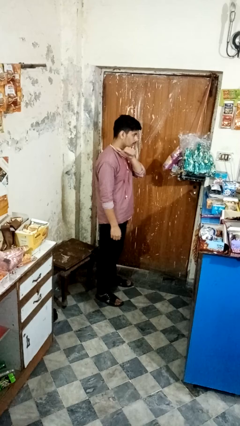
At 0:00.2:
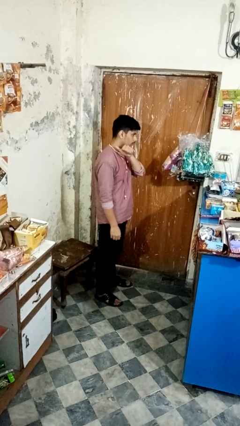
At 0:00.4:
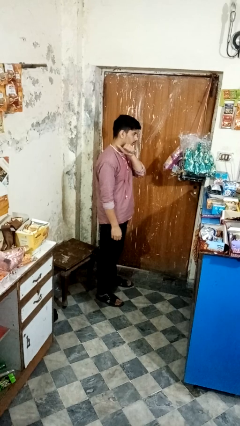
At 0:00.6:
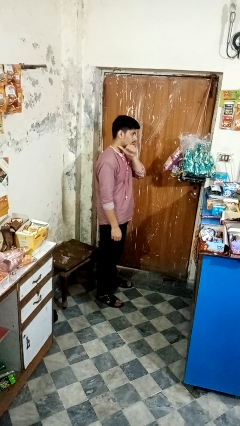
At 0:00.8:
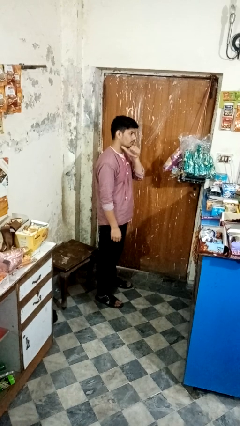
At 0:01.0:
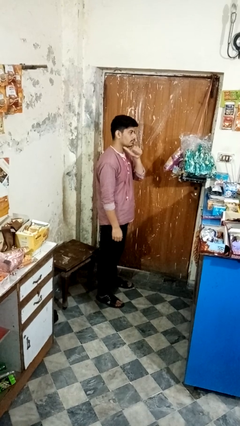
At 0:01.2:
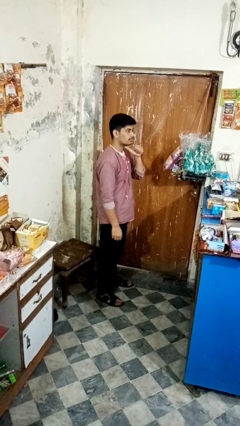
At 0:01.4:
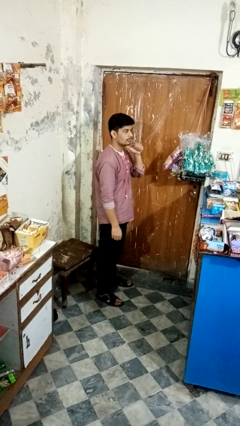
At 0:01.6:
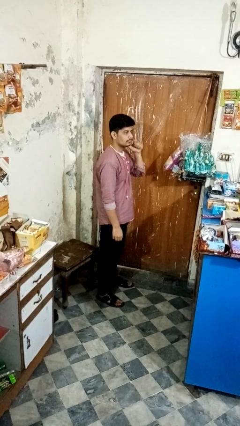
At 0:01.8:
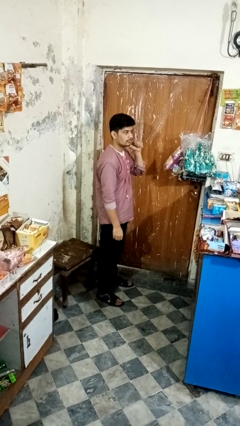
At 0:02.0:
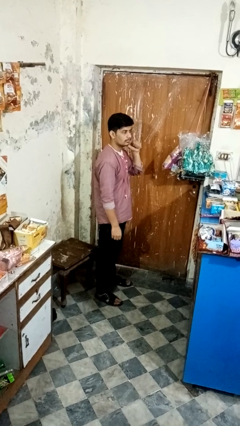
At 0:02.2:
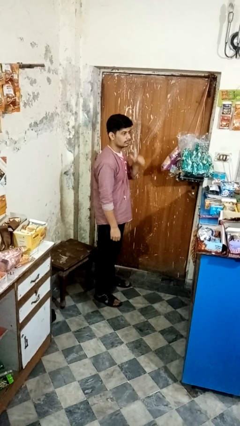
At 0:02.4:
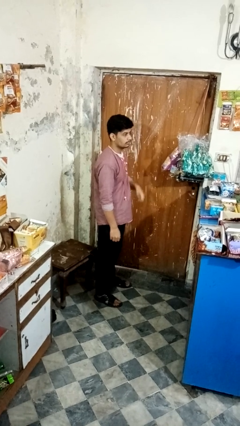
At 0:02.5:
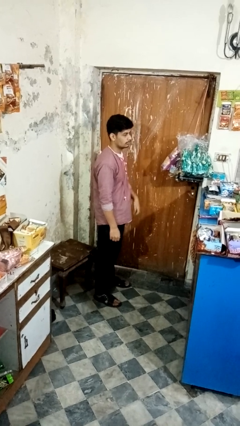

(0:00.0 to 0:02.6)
person gestures cut

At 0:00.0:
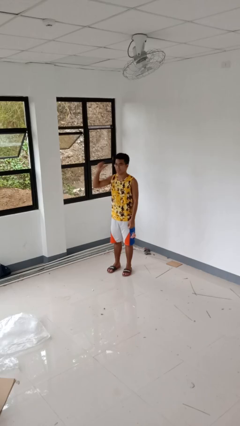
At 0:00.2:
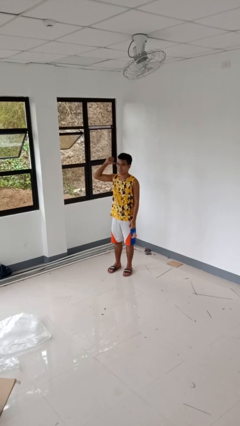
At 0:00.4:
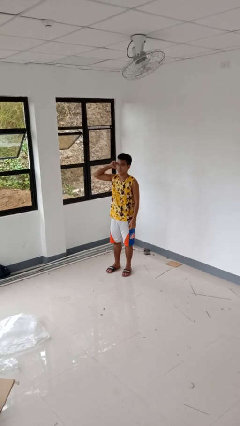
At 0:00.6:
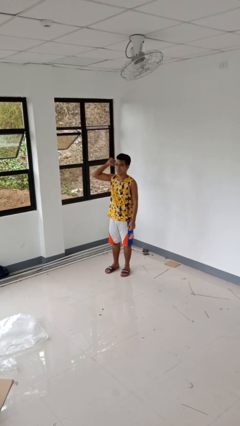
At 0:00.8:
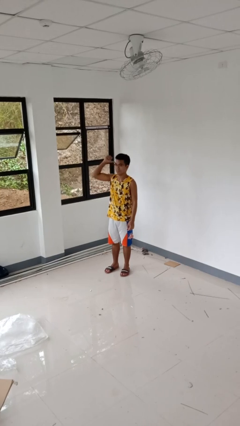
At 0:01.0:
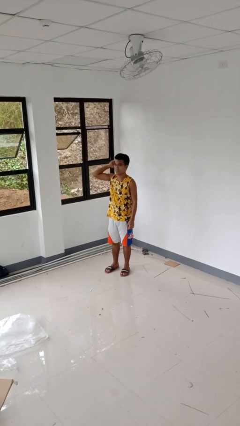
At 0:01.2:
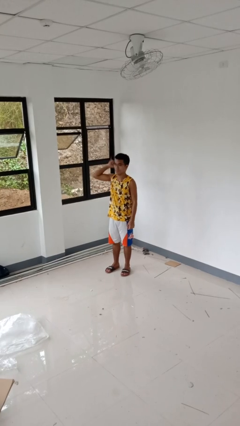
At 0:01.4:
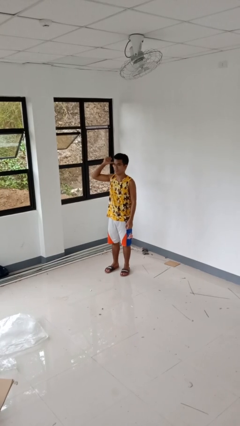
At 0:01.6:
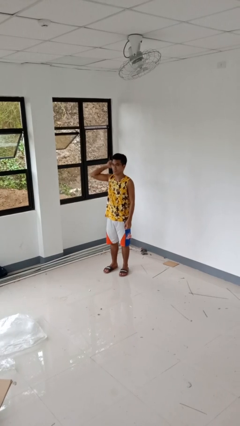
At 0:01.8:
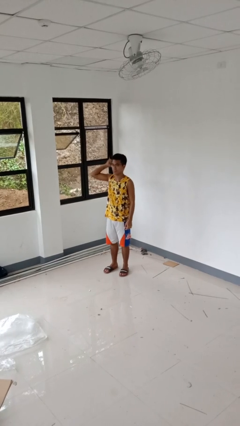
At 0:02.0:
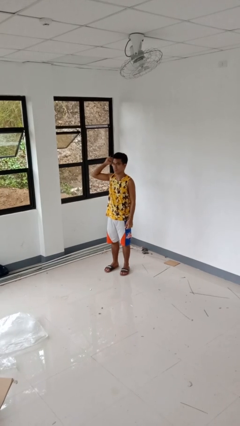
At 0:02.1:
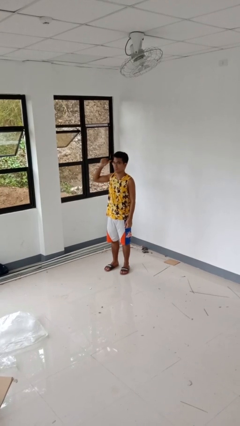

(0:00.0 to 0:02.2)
person gestures behind me

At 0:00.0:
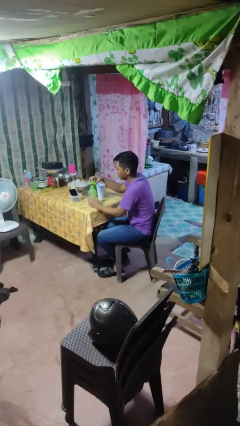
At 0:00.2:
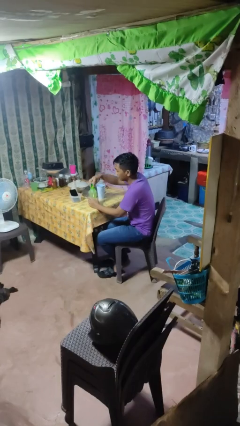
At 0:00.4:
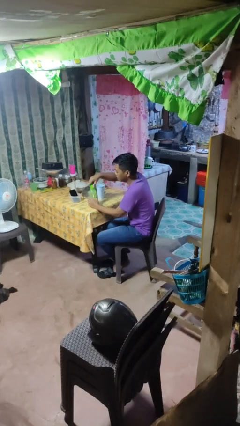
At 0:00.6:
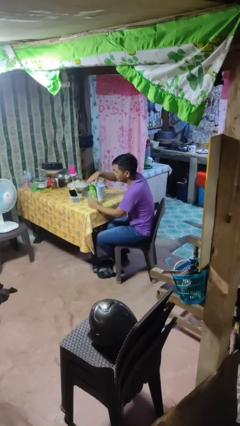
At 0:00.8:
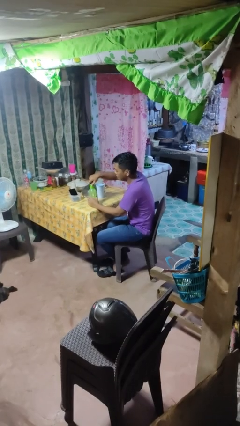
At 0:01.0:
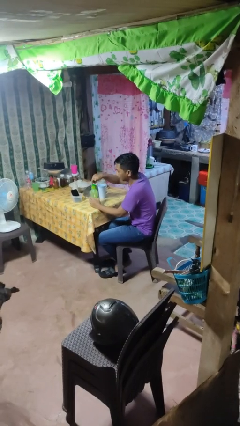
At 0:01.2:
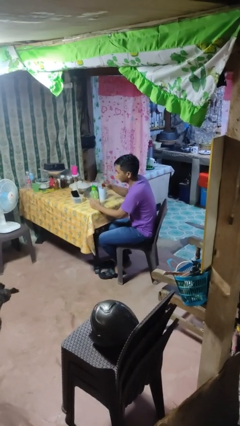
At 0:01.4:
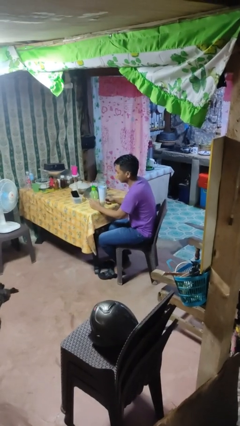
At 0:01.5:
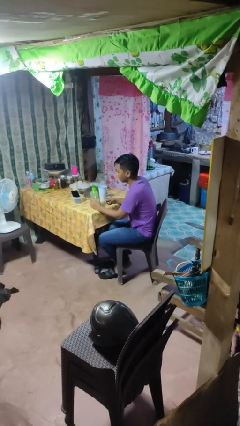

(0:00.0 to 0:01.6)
person screws lid to bottle

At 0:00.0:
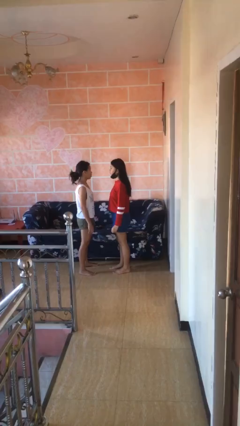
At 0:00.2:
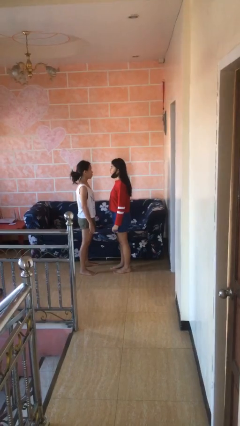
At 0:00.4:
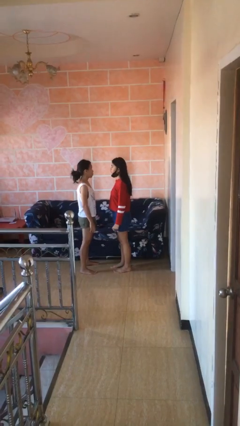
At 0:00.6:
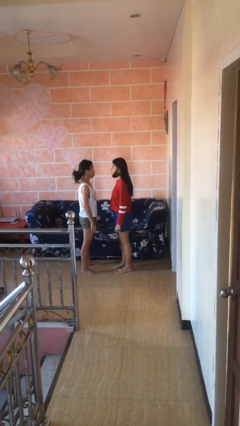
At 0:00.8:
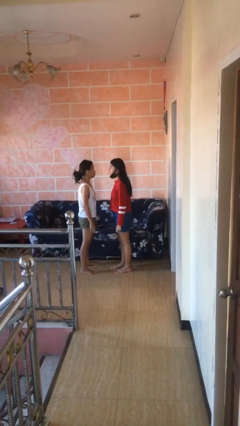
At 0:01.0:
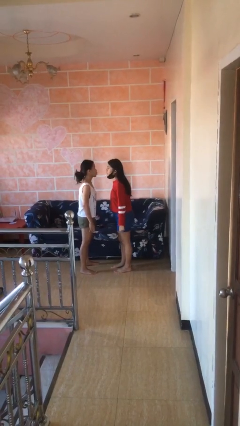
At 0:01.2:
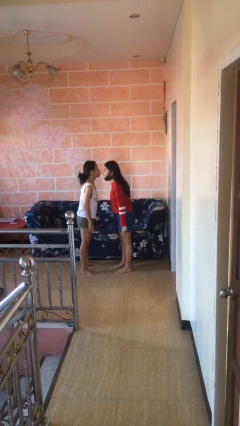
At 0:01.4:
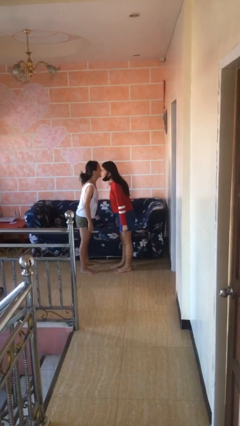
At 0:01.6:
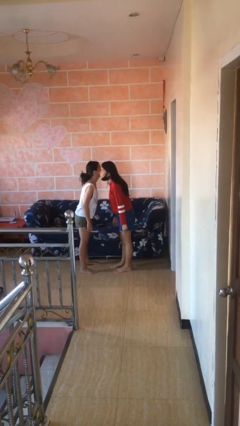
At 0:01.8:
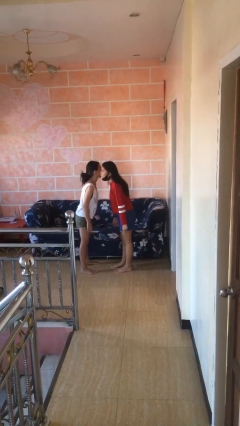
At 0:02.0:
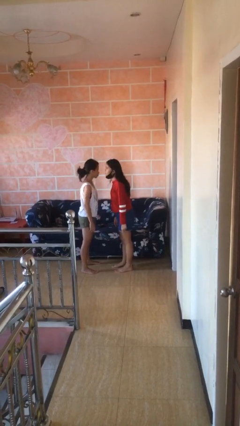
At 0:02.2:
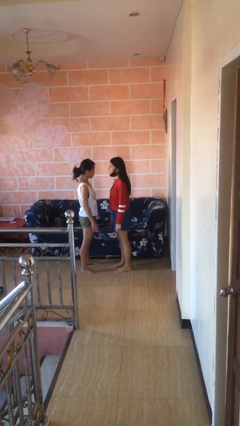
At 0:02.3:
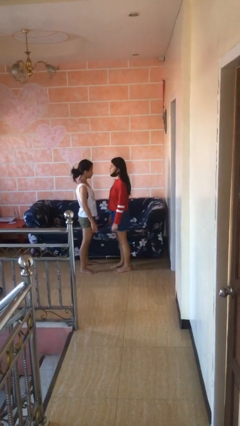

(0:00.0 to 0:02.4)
person kisses cheek of person

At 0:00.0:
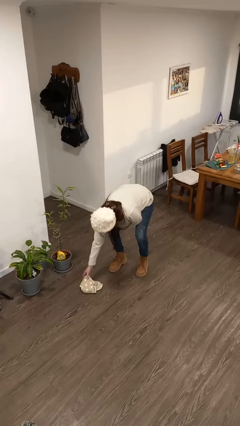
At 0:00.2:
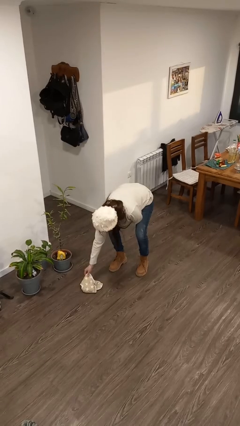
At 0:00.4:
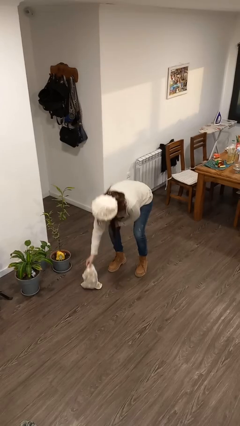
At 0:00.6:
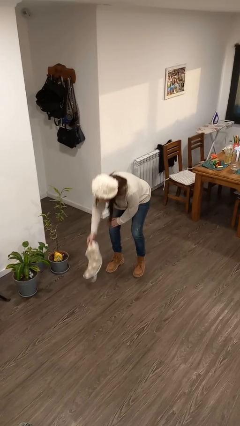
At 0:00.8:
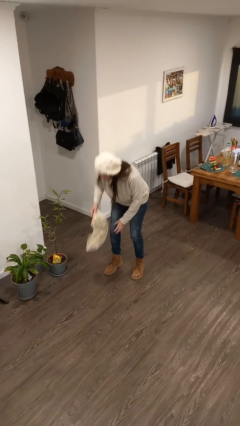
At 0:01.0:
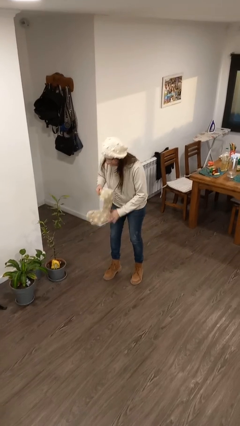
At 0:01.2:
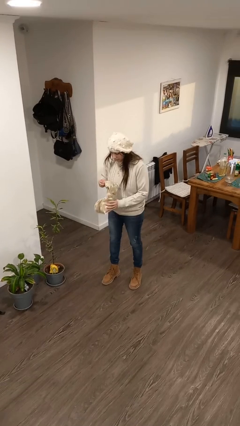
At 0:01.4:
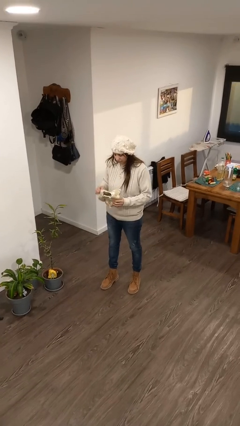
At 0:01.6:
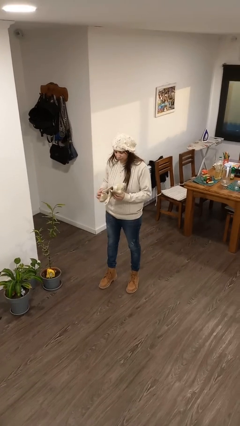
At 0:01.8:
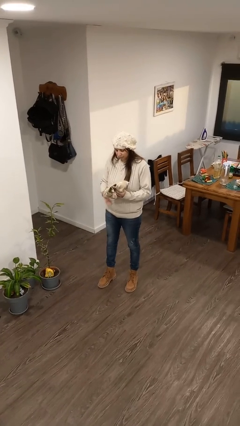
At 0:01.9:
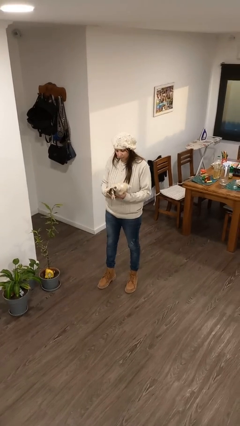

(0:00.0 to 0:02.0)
person picks up object from floor

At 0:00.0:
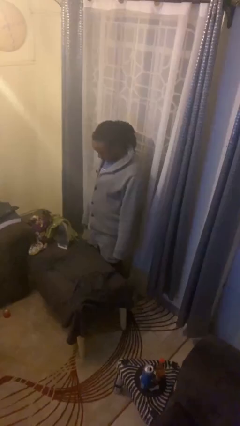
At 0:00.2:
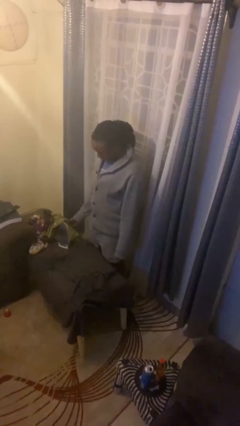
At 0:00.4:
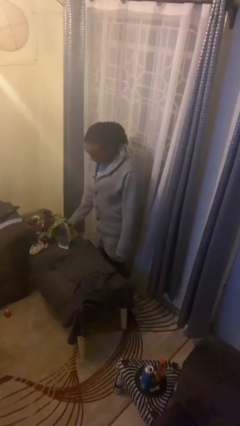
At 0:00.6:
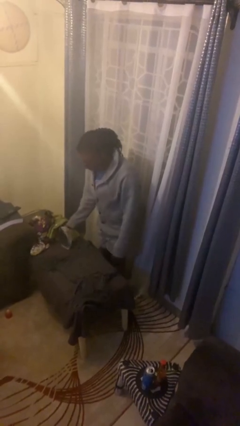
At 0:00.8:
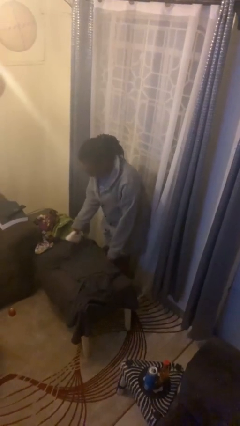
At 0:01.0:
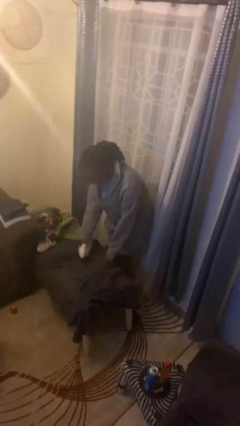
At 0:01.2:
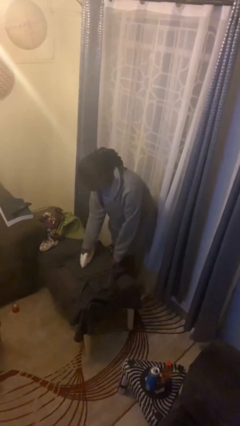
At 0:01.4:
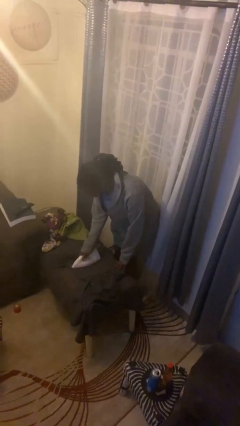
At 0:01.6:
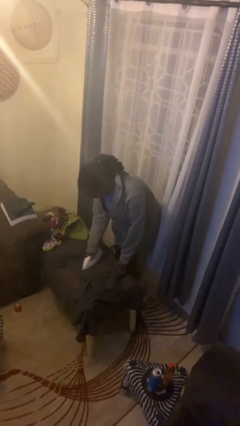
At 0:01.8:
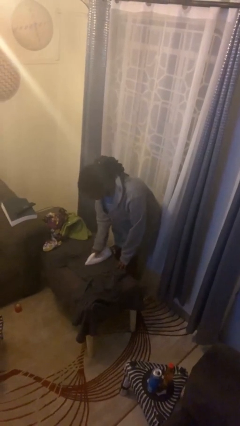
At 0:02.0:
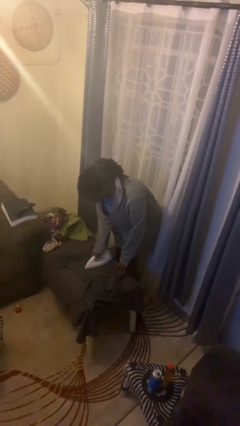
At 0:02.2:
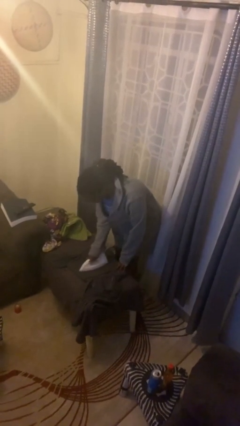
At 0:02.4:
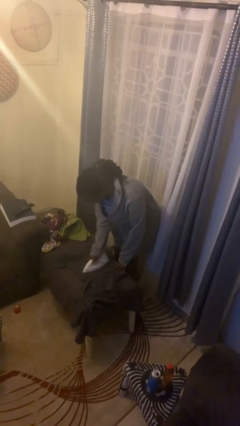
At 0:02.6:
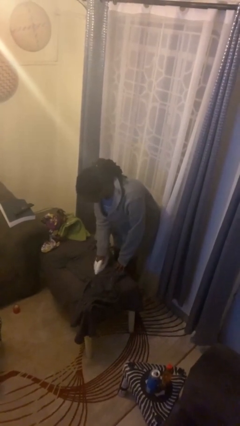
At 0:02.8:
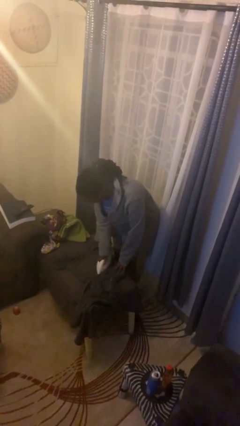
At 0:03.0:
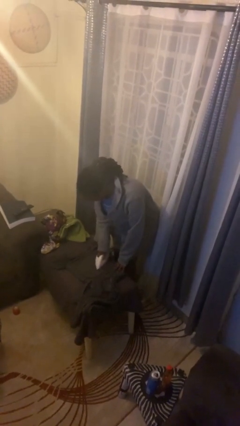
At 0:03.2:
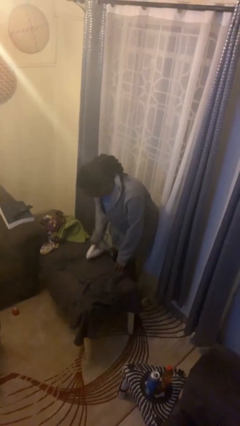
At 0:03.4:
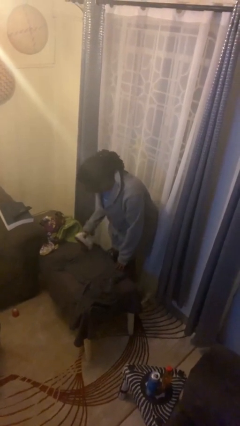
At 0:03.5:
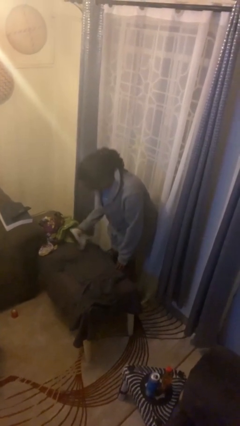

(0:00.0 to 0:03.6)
person irons clothes

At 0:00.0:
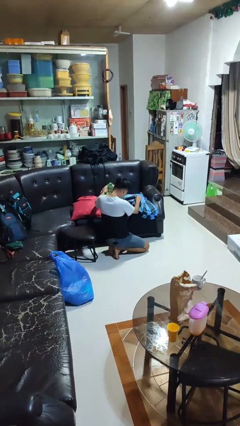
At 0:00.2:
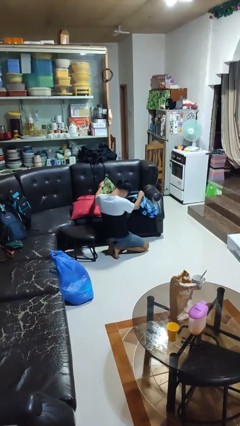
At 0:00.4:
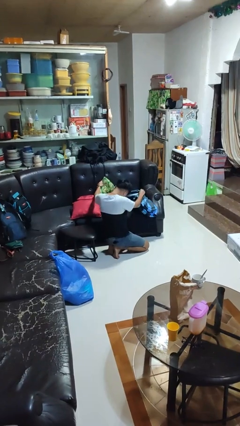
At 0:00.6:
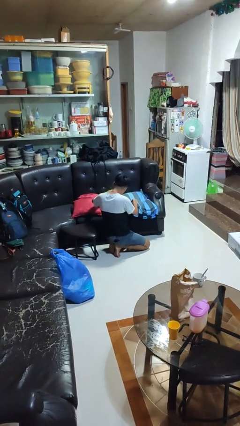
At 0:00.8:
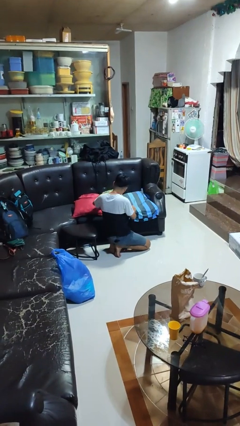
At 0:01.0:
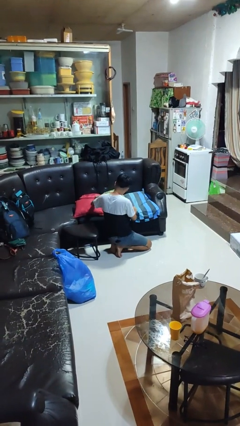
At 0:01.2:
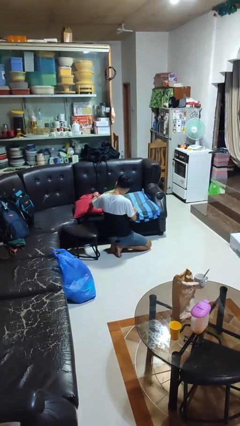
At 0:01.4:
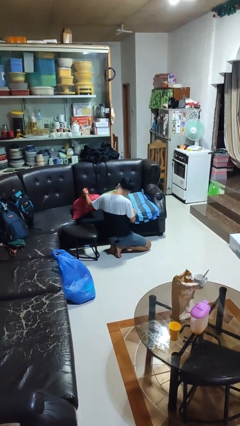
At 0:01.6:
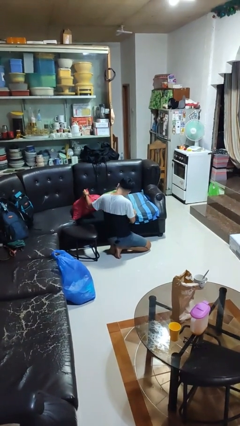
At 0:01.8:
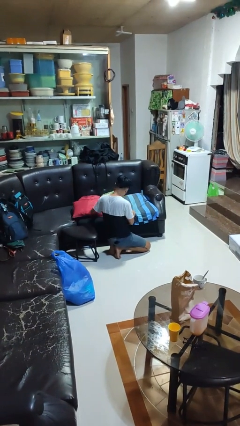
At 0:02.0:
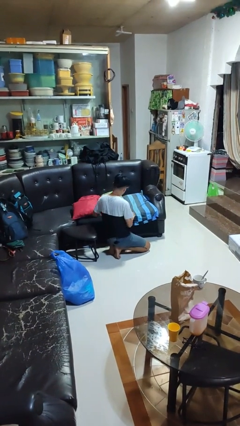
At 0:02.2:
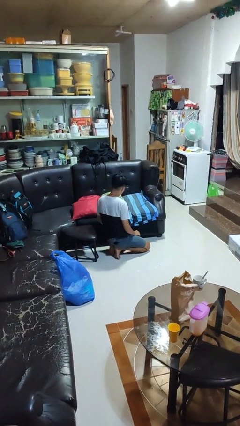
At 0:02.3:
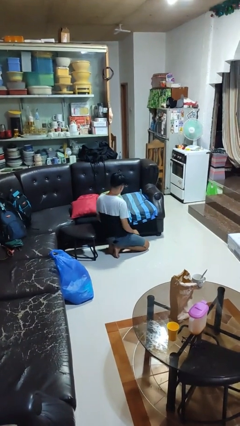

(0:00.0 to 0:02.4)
person searches in couch

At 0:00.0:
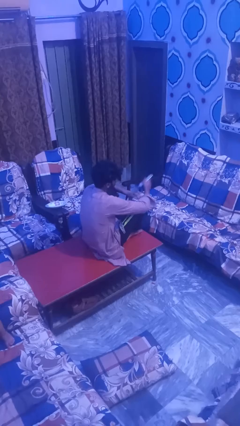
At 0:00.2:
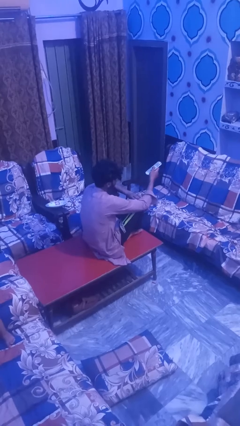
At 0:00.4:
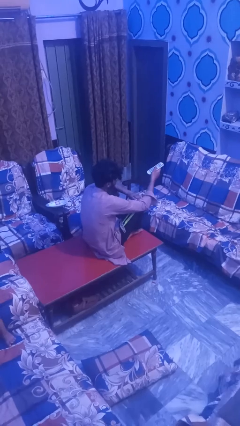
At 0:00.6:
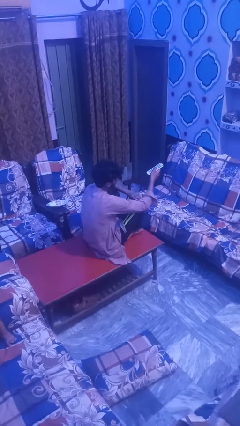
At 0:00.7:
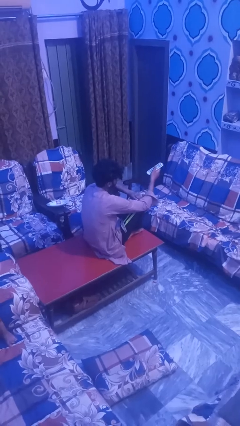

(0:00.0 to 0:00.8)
person uses television remote
